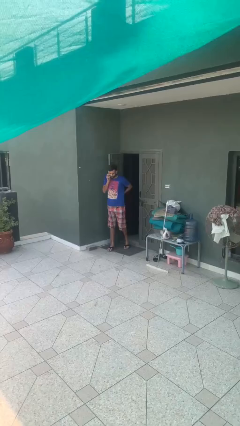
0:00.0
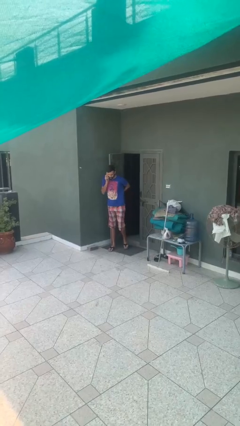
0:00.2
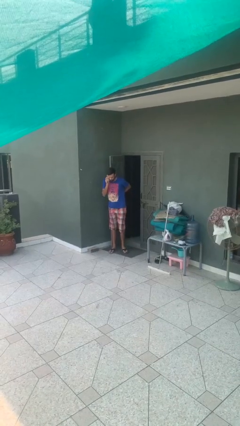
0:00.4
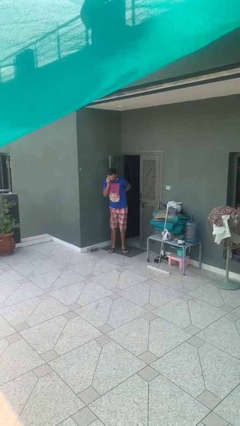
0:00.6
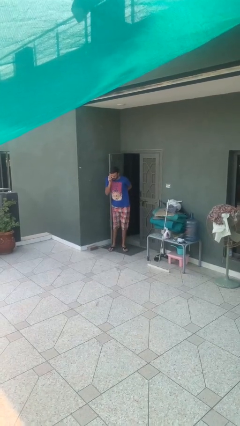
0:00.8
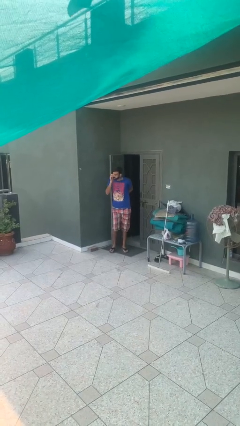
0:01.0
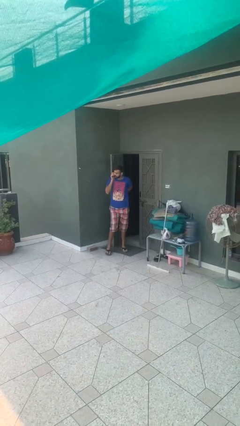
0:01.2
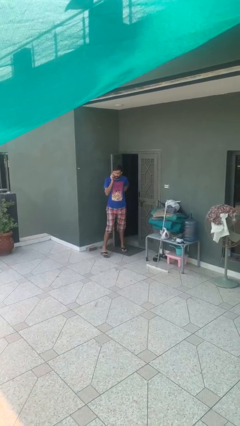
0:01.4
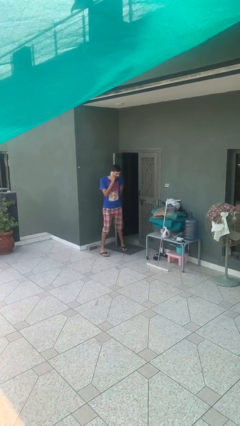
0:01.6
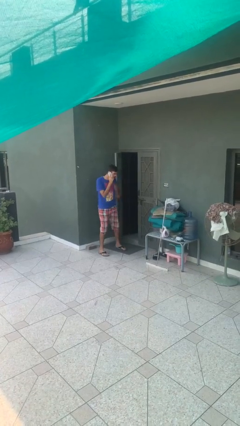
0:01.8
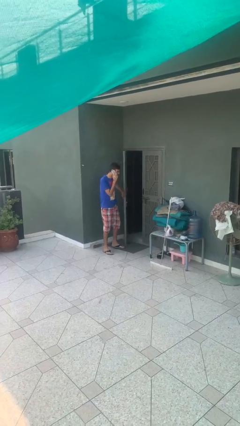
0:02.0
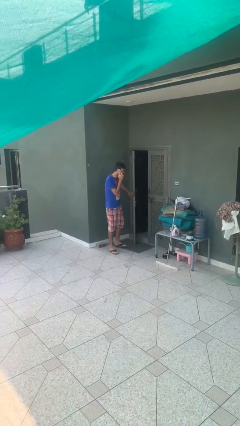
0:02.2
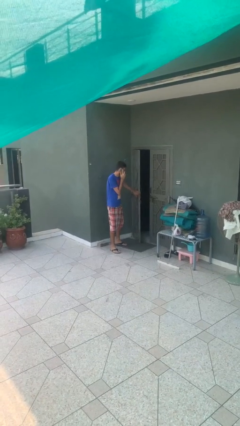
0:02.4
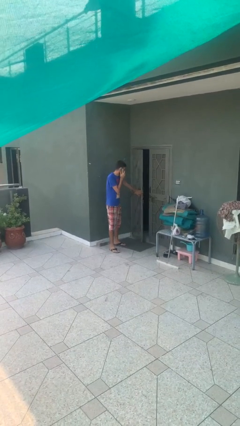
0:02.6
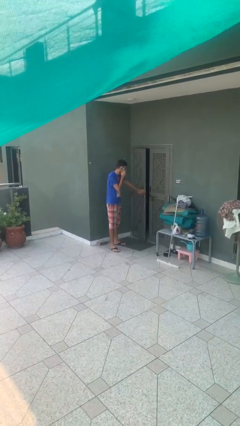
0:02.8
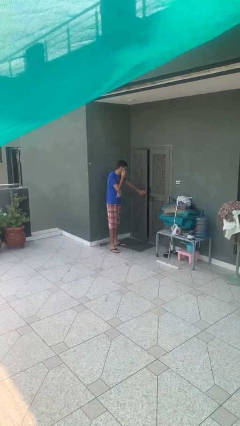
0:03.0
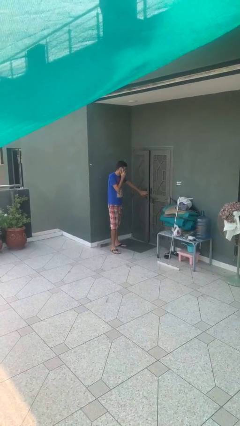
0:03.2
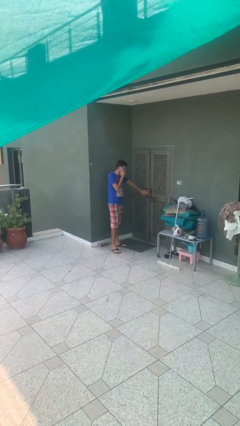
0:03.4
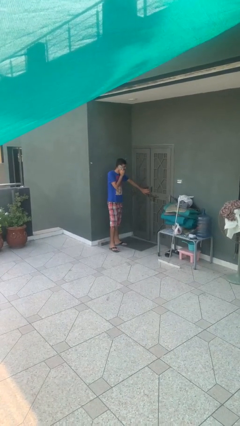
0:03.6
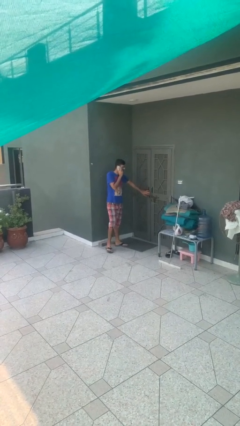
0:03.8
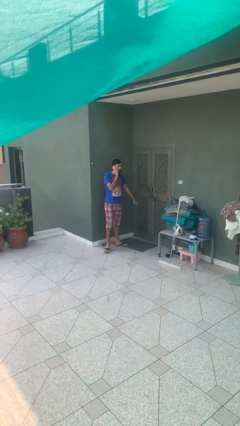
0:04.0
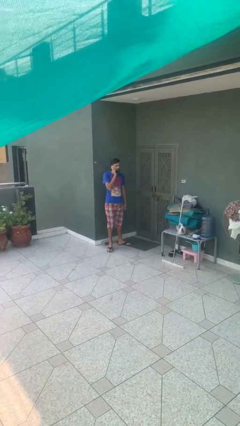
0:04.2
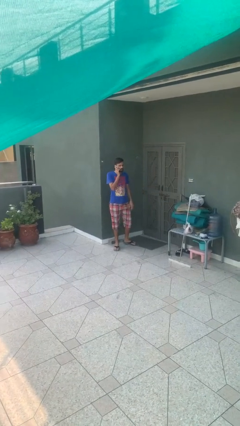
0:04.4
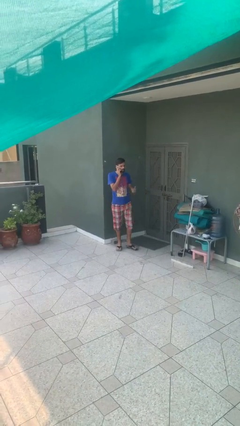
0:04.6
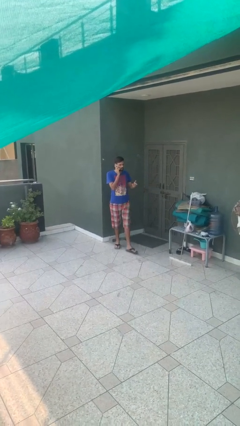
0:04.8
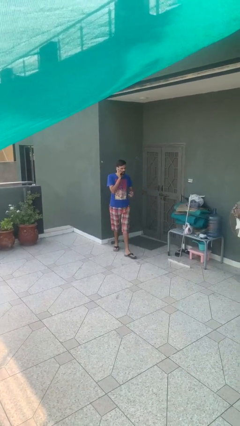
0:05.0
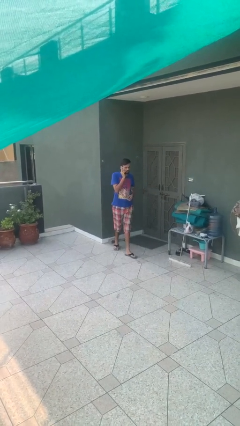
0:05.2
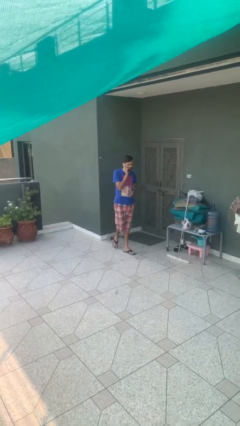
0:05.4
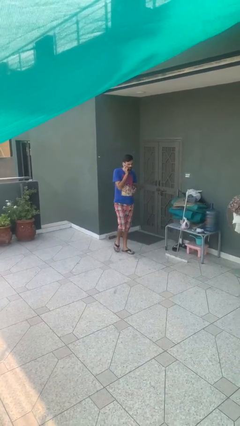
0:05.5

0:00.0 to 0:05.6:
person closes facility door

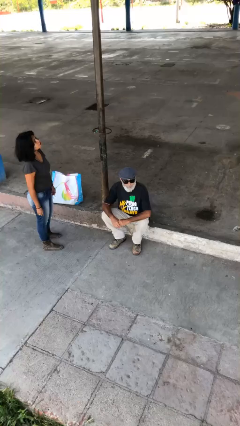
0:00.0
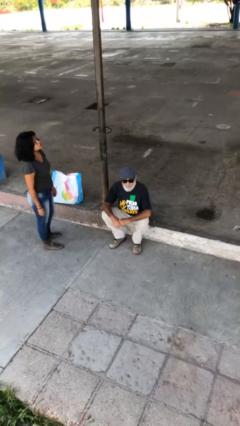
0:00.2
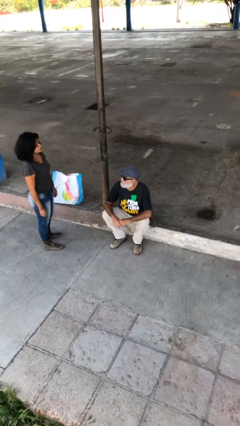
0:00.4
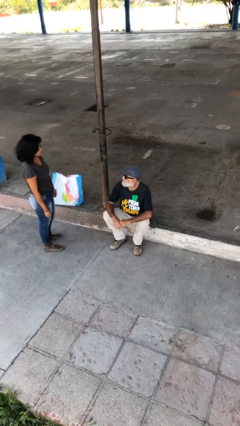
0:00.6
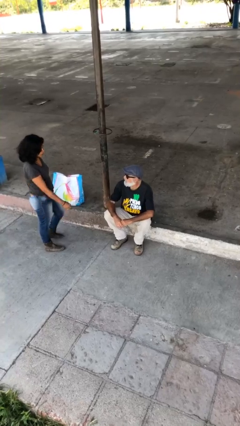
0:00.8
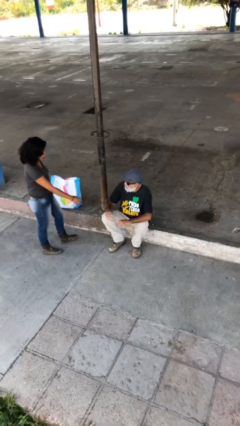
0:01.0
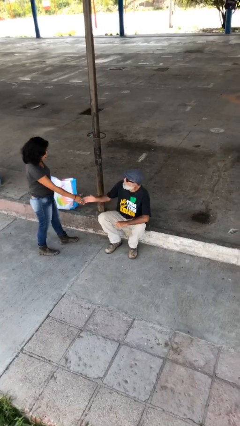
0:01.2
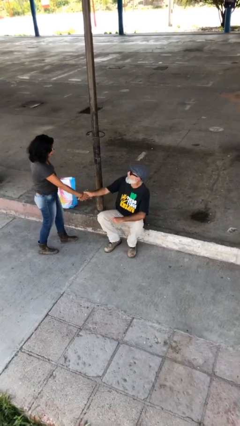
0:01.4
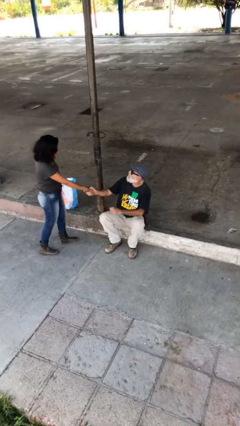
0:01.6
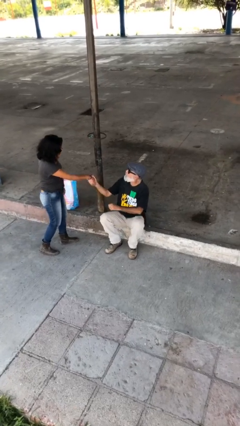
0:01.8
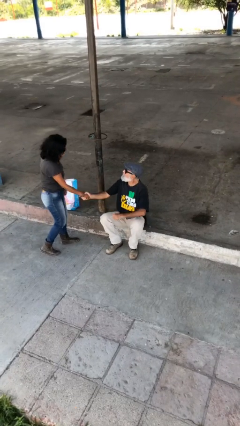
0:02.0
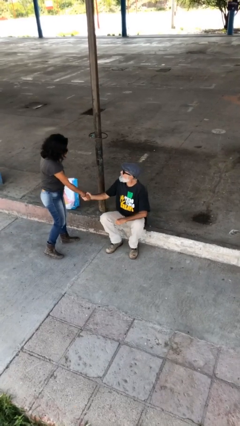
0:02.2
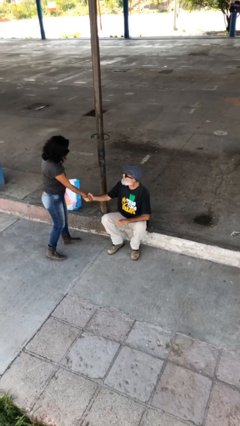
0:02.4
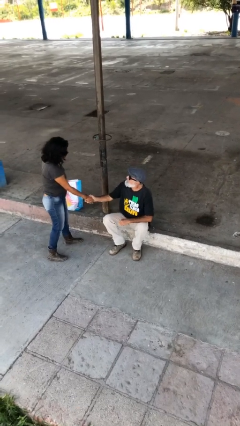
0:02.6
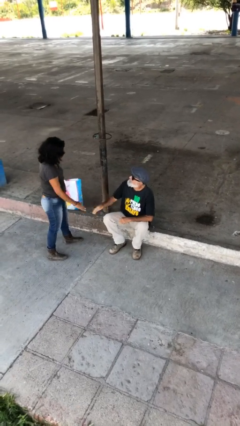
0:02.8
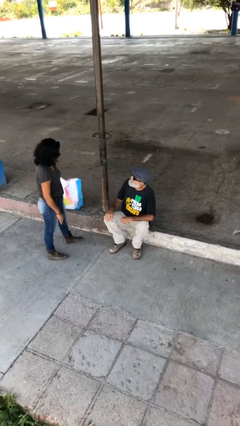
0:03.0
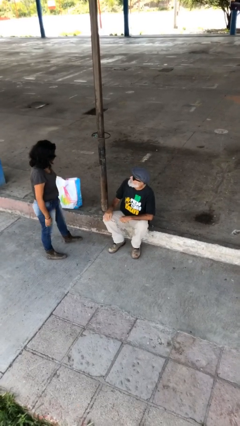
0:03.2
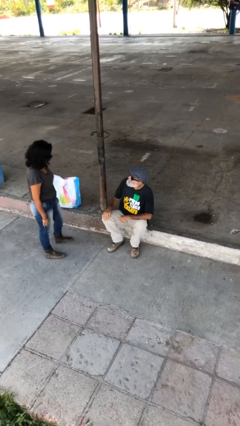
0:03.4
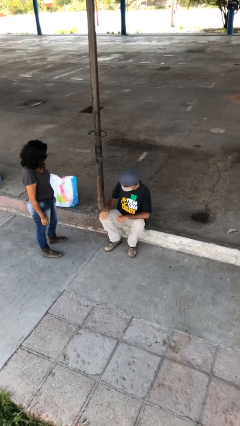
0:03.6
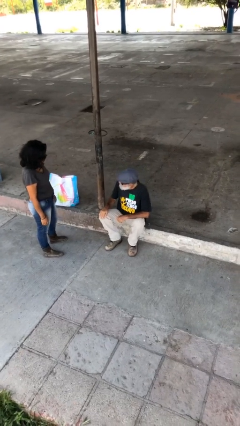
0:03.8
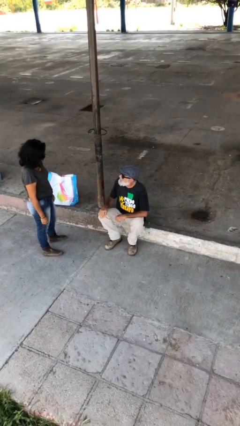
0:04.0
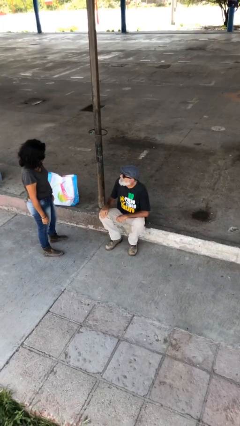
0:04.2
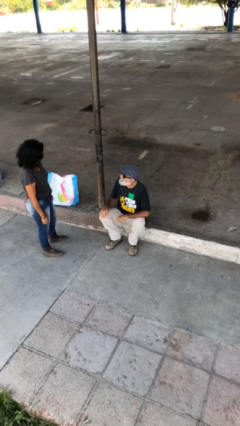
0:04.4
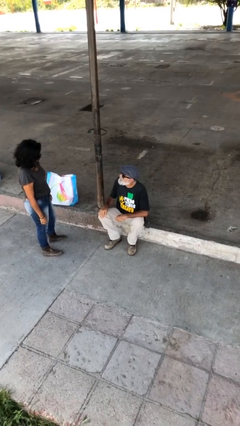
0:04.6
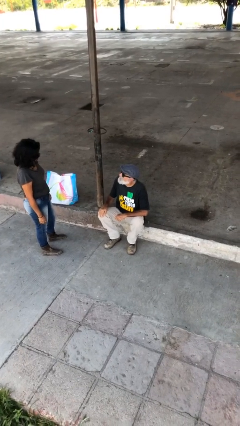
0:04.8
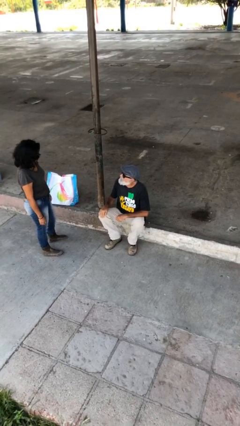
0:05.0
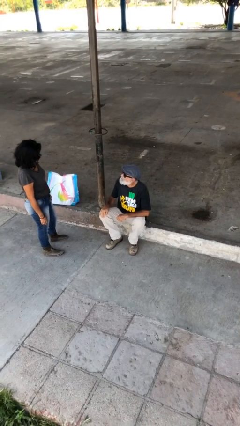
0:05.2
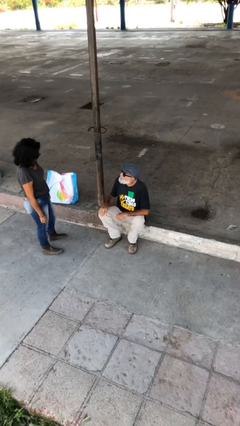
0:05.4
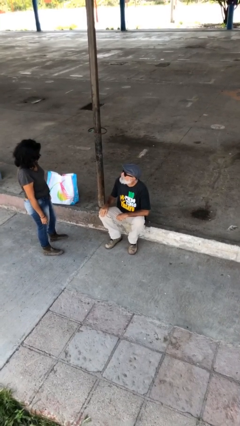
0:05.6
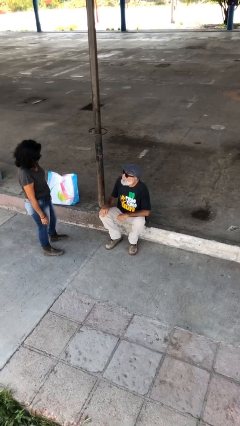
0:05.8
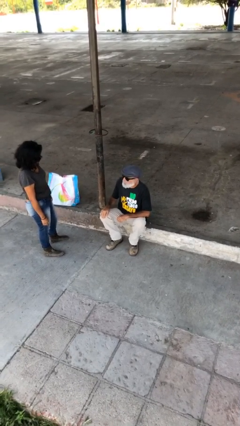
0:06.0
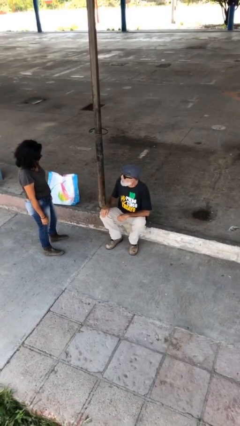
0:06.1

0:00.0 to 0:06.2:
person shakes hand

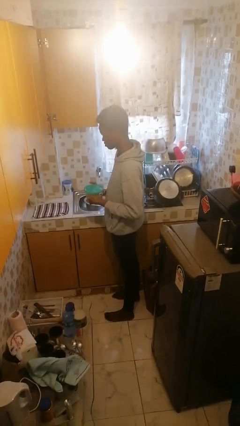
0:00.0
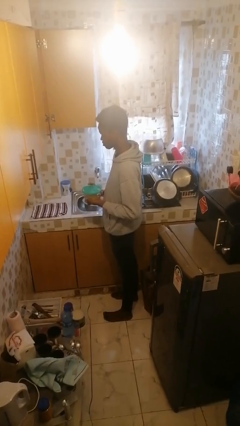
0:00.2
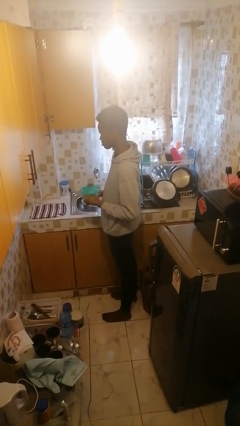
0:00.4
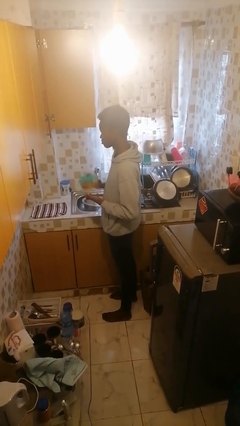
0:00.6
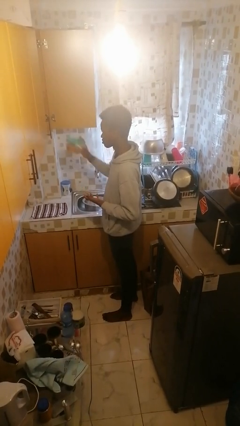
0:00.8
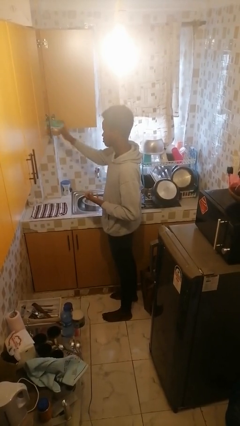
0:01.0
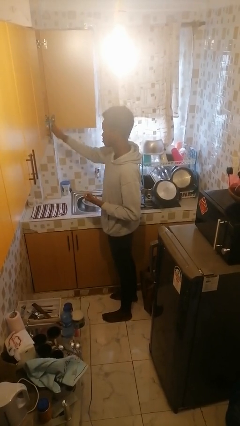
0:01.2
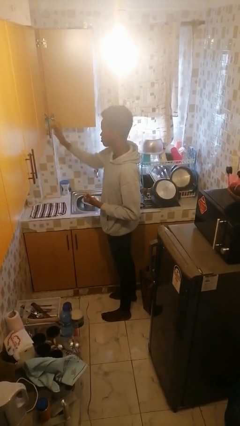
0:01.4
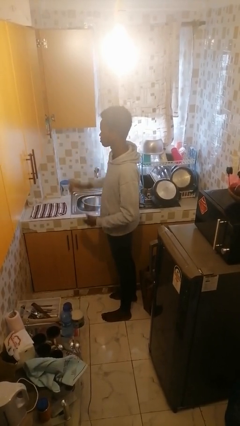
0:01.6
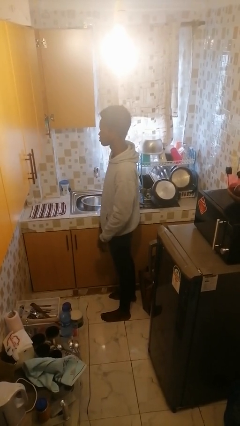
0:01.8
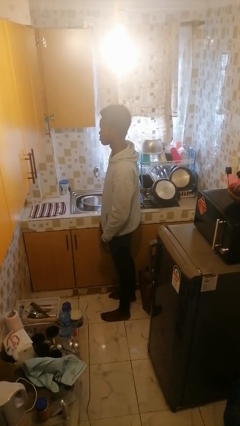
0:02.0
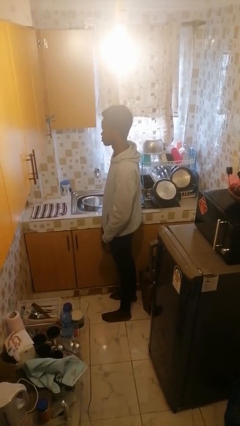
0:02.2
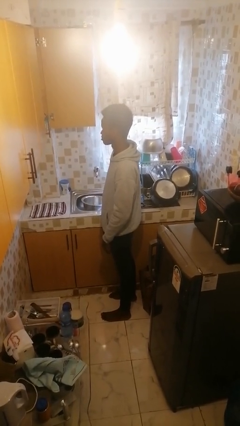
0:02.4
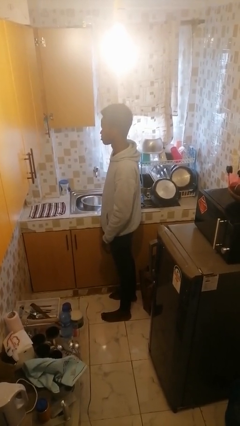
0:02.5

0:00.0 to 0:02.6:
person puts down object into cabinet

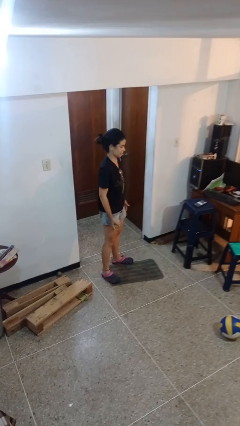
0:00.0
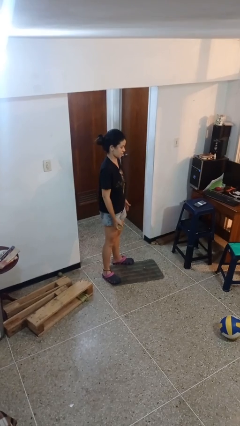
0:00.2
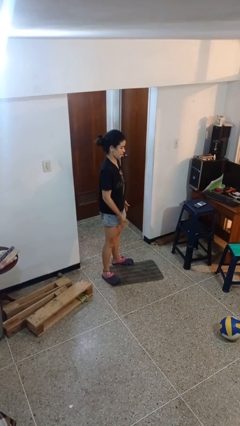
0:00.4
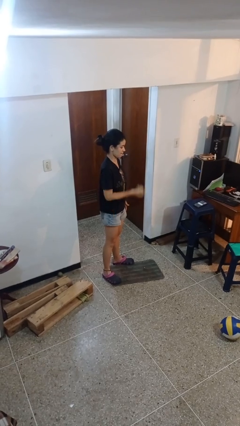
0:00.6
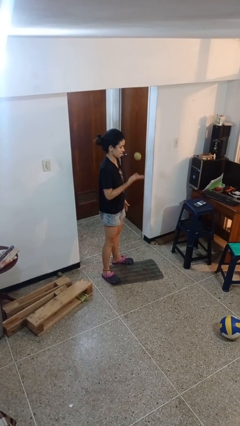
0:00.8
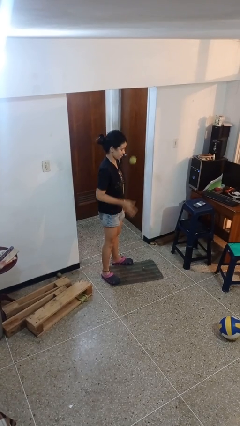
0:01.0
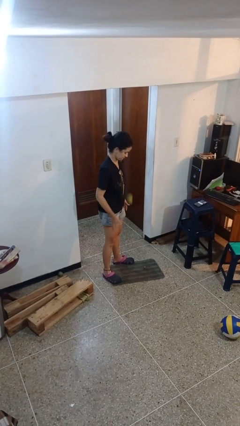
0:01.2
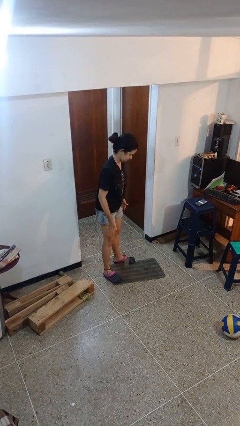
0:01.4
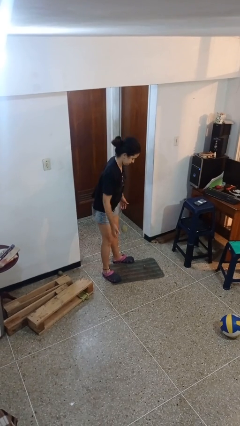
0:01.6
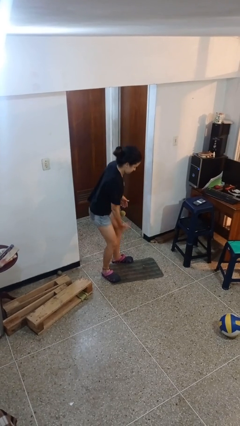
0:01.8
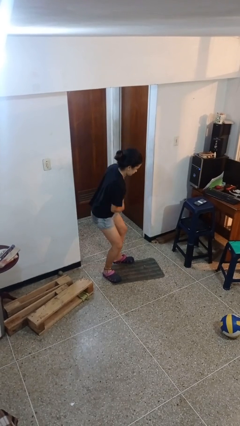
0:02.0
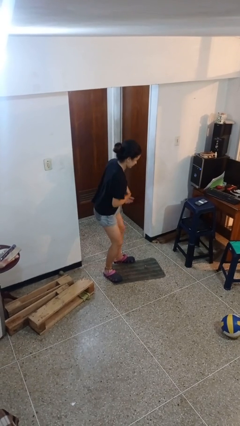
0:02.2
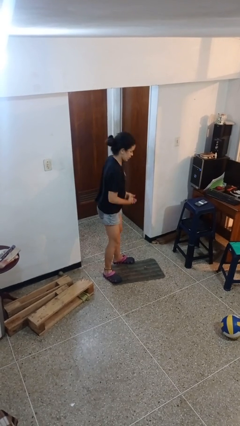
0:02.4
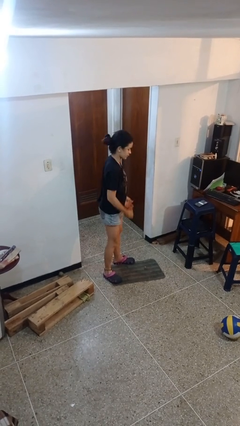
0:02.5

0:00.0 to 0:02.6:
person bounces ball on floor

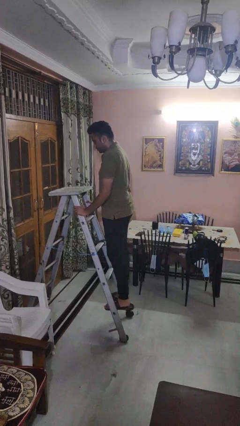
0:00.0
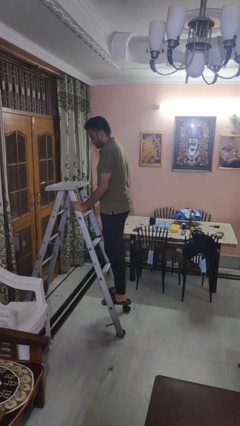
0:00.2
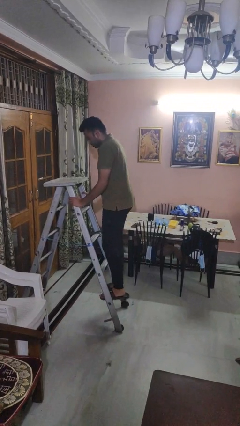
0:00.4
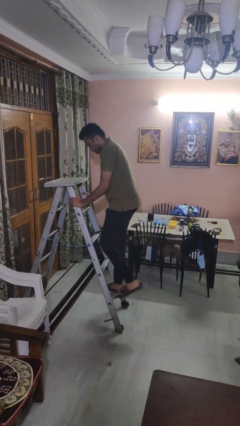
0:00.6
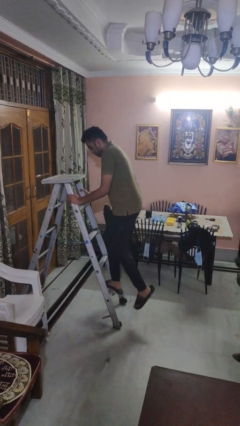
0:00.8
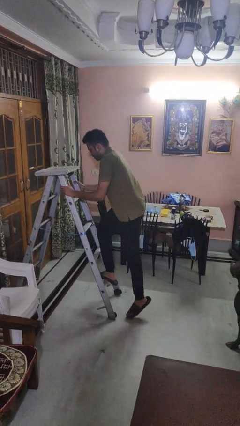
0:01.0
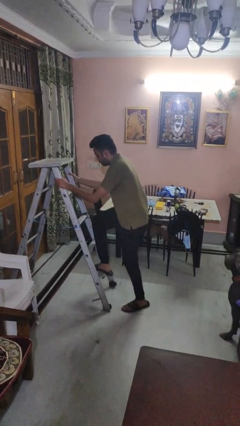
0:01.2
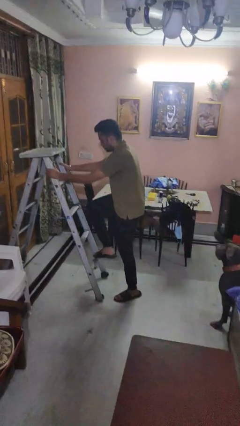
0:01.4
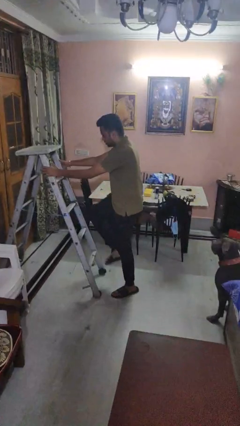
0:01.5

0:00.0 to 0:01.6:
person climbs down ladder
